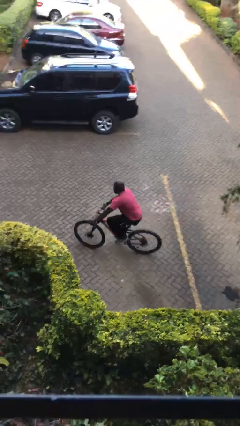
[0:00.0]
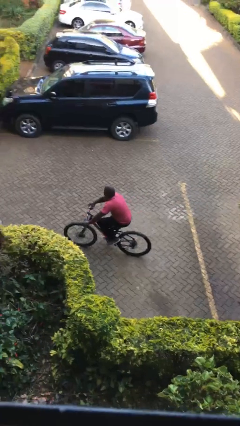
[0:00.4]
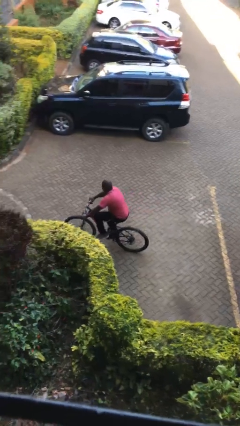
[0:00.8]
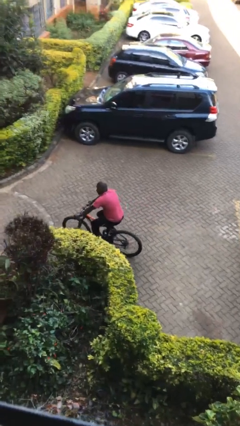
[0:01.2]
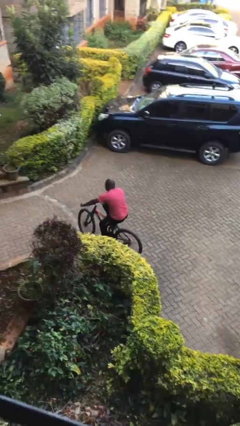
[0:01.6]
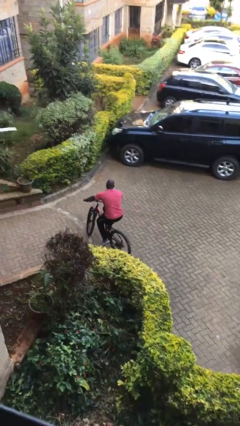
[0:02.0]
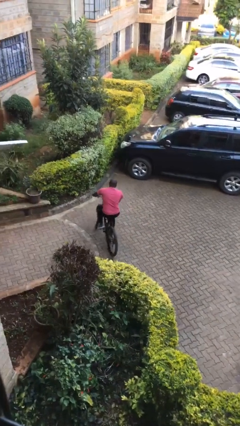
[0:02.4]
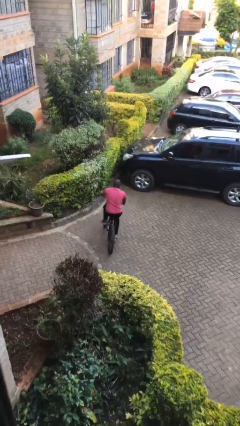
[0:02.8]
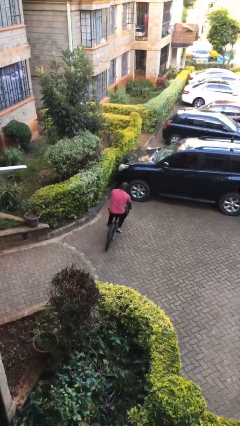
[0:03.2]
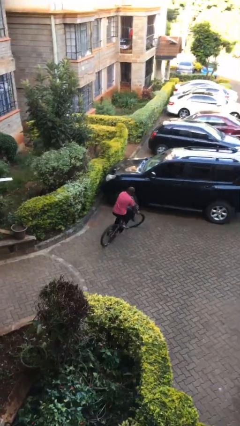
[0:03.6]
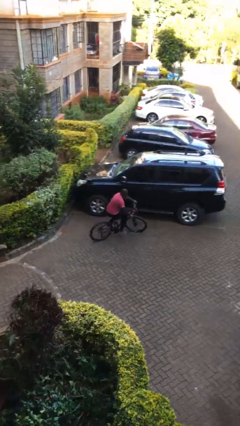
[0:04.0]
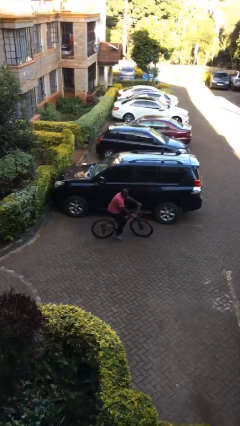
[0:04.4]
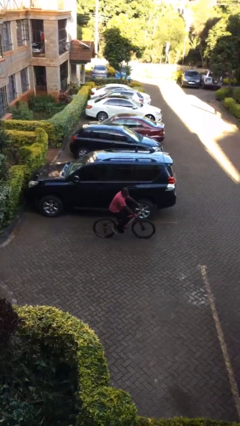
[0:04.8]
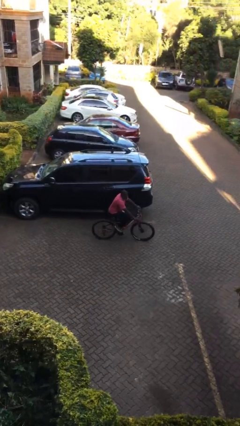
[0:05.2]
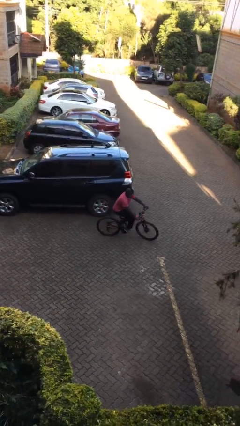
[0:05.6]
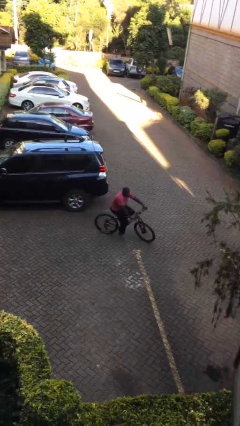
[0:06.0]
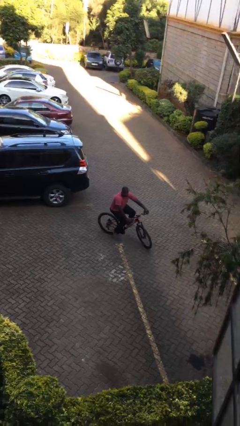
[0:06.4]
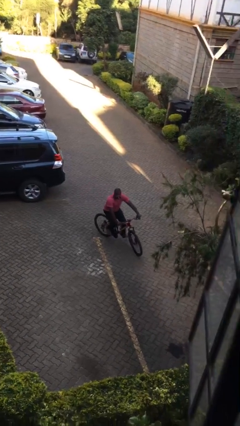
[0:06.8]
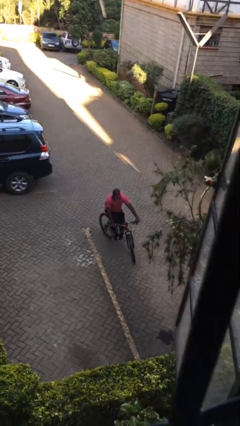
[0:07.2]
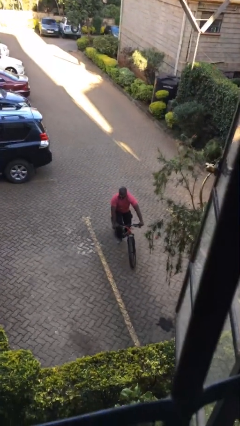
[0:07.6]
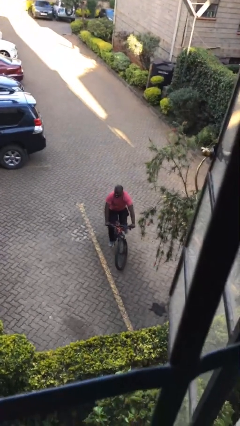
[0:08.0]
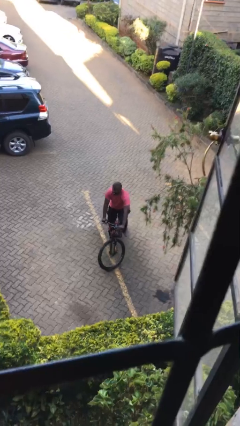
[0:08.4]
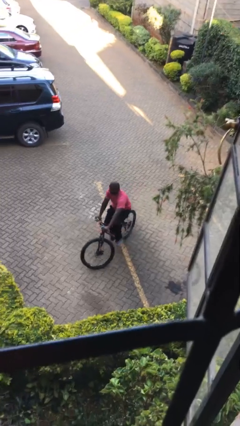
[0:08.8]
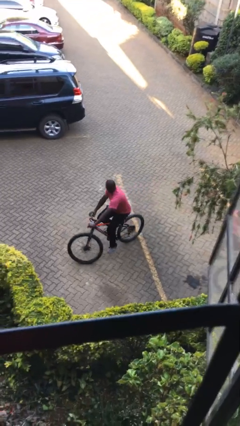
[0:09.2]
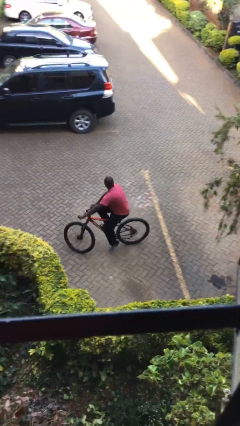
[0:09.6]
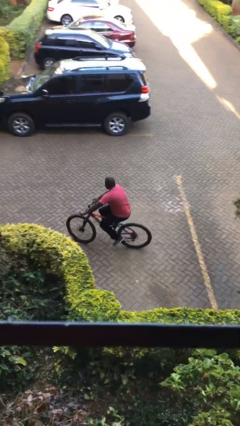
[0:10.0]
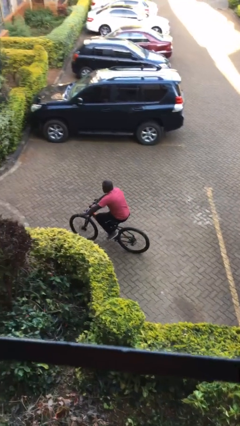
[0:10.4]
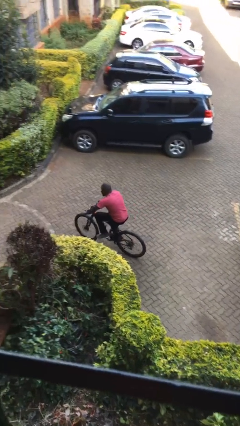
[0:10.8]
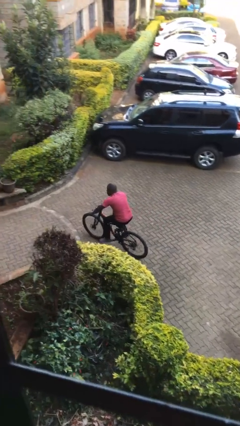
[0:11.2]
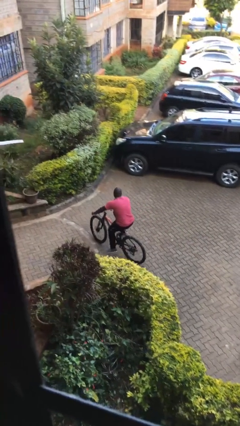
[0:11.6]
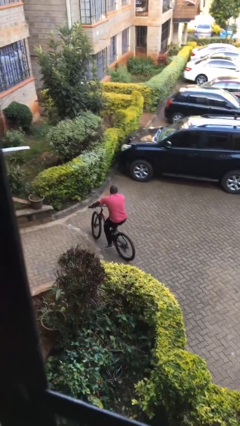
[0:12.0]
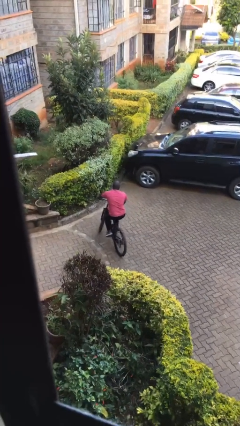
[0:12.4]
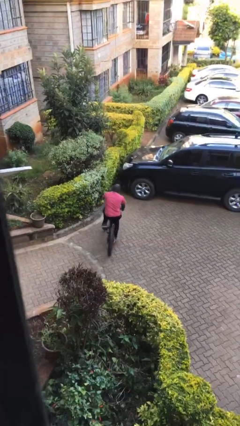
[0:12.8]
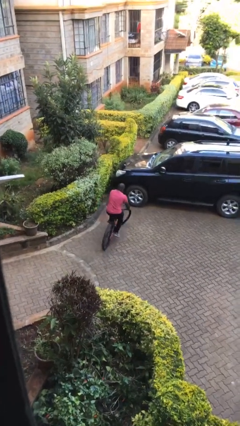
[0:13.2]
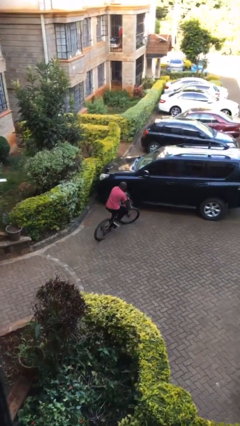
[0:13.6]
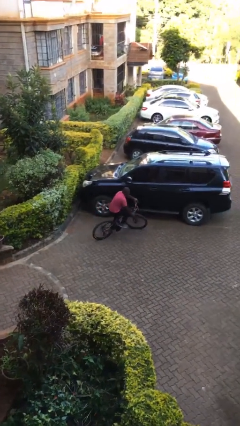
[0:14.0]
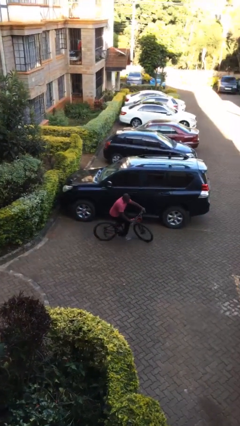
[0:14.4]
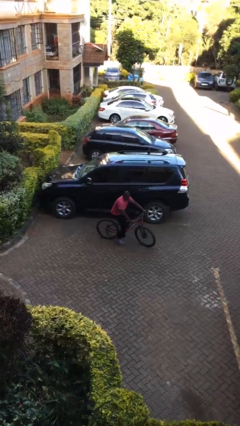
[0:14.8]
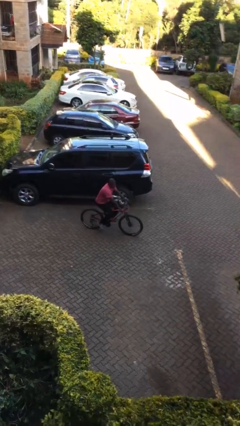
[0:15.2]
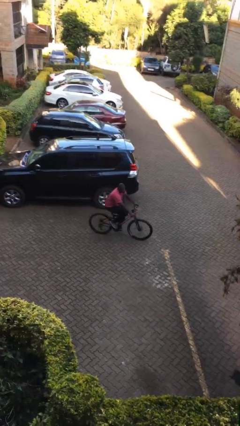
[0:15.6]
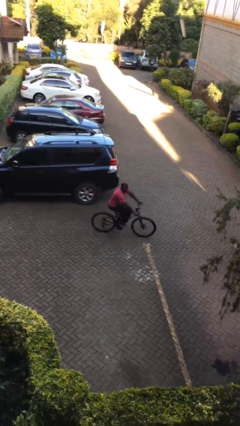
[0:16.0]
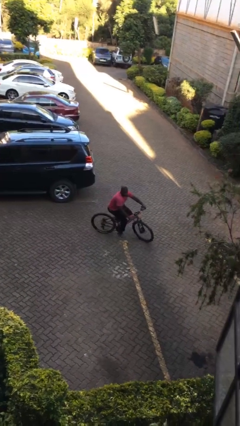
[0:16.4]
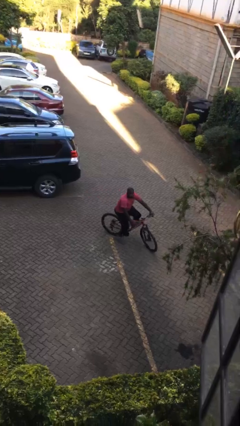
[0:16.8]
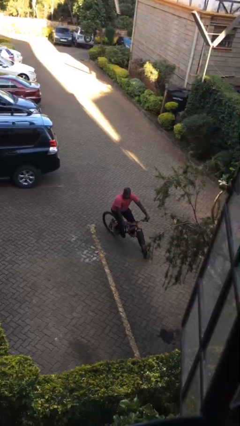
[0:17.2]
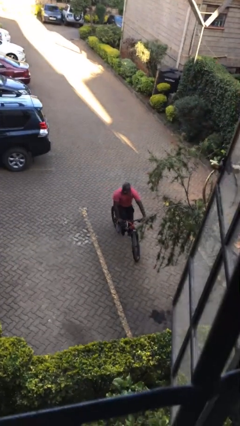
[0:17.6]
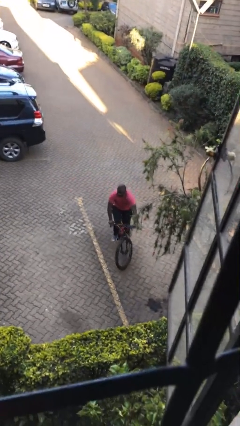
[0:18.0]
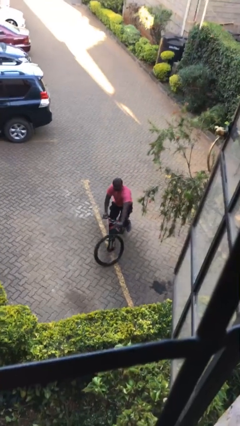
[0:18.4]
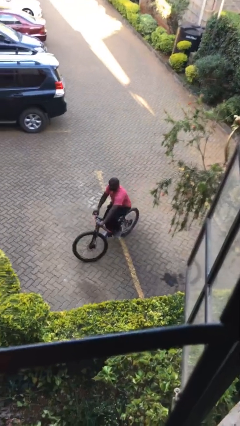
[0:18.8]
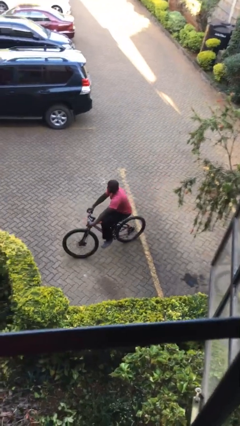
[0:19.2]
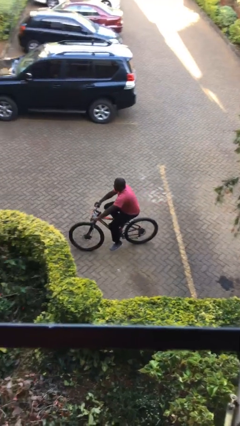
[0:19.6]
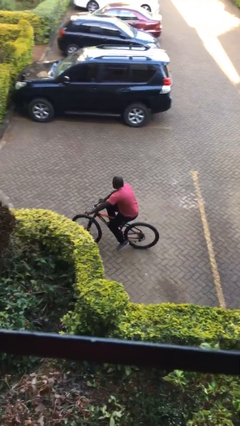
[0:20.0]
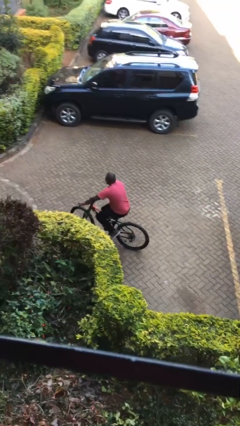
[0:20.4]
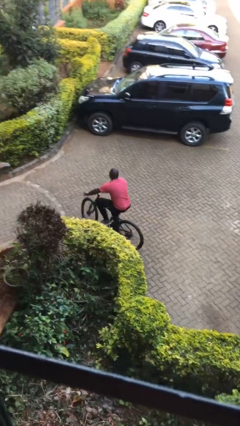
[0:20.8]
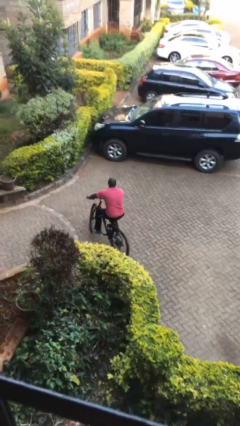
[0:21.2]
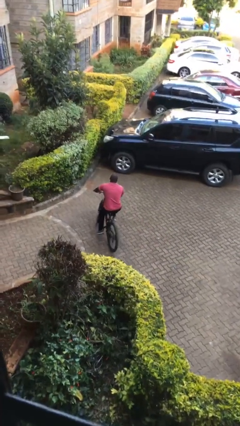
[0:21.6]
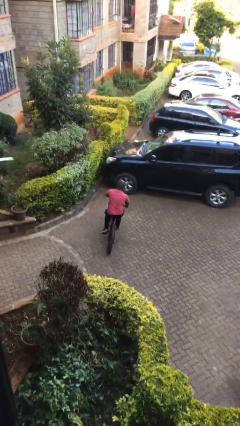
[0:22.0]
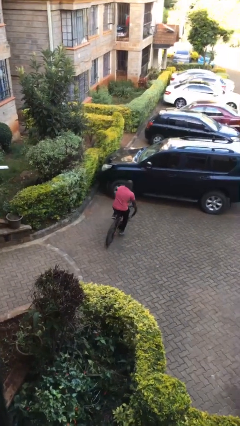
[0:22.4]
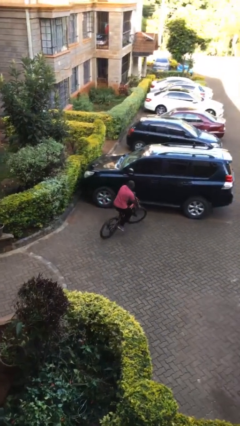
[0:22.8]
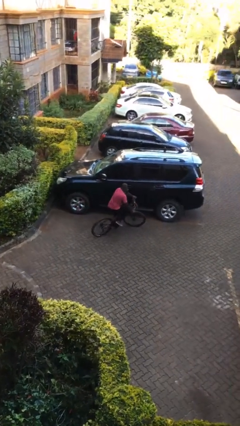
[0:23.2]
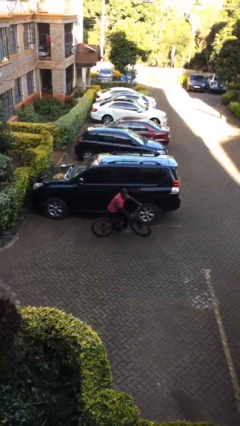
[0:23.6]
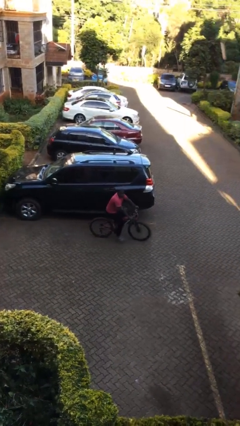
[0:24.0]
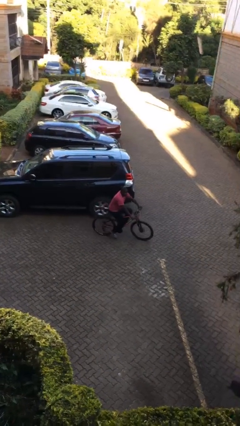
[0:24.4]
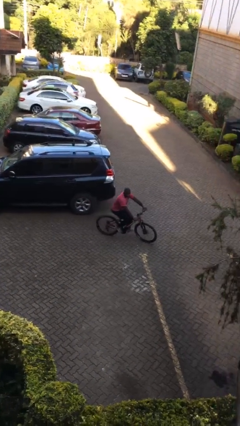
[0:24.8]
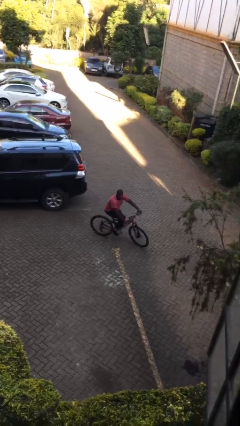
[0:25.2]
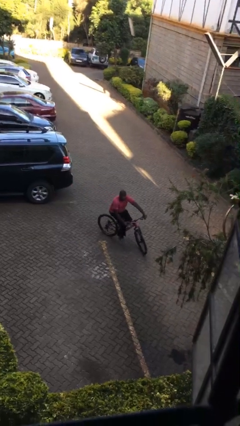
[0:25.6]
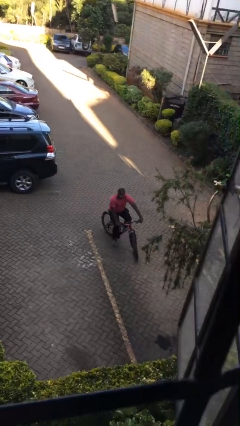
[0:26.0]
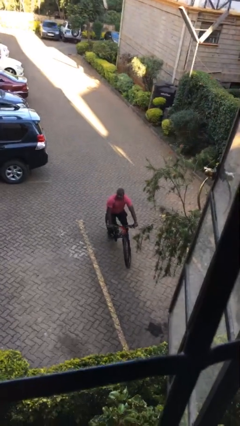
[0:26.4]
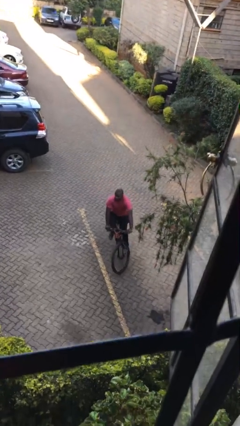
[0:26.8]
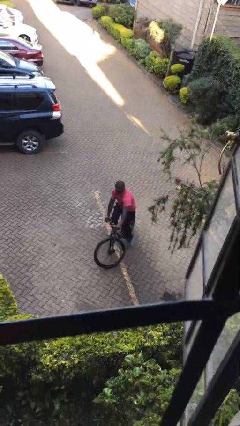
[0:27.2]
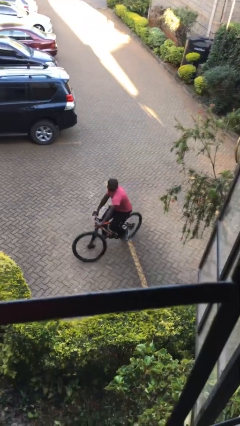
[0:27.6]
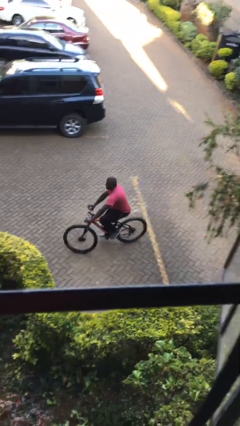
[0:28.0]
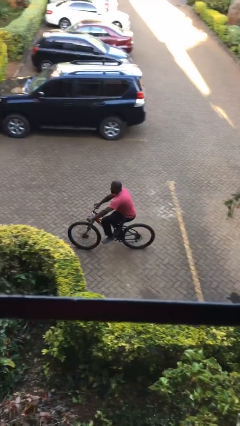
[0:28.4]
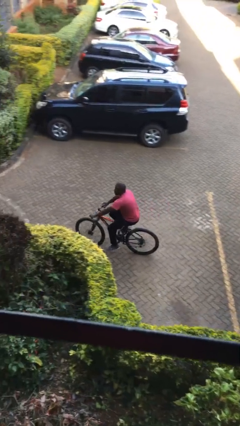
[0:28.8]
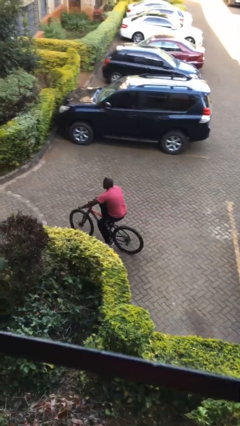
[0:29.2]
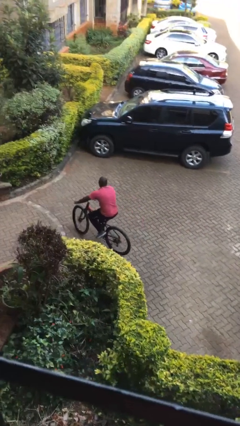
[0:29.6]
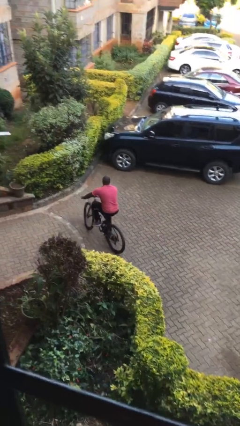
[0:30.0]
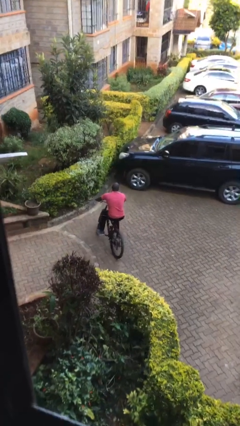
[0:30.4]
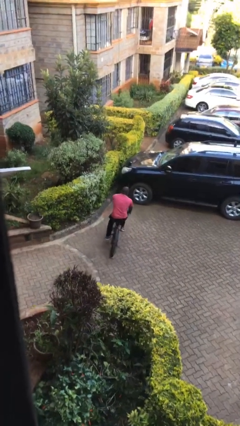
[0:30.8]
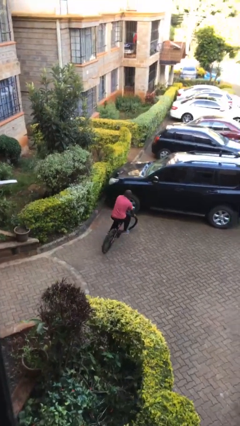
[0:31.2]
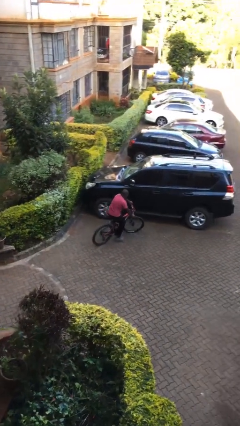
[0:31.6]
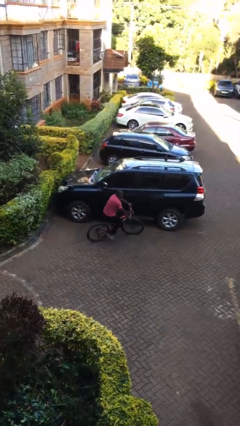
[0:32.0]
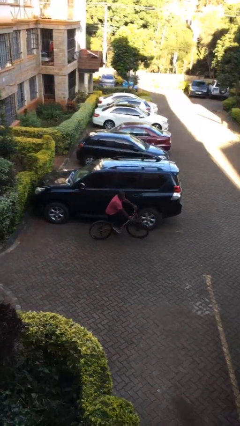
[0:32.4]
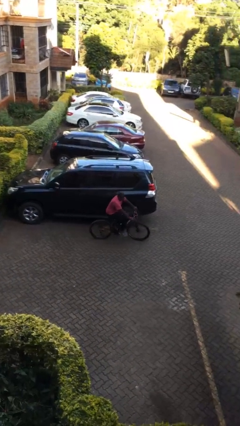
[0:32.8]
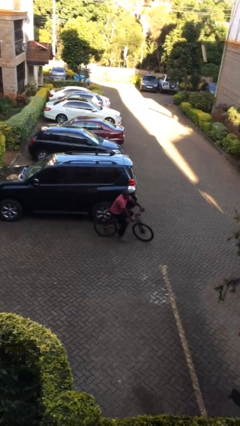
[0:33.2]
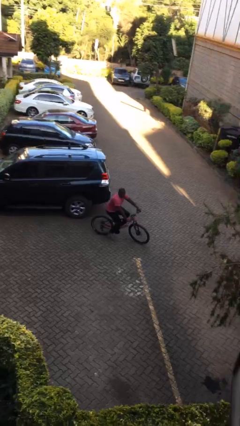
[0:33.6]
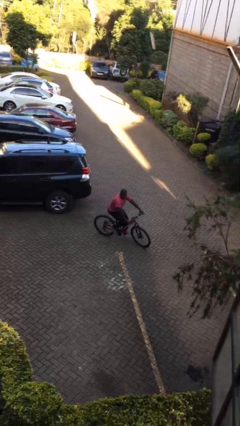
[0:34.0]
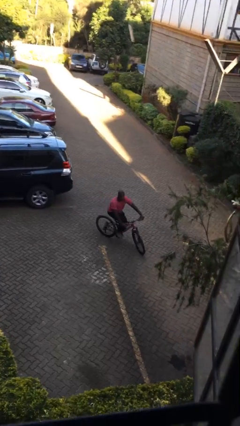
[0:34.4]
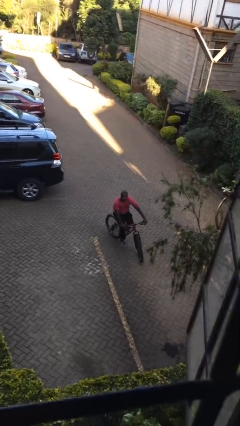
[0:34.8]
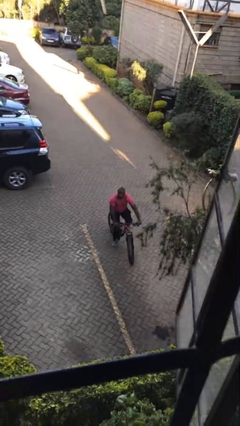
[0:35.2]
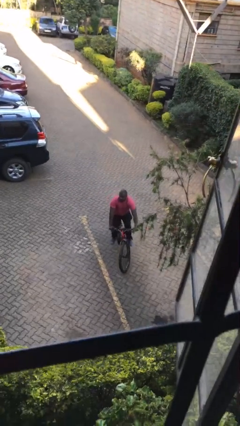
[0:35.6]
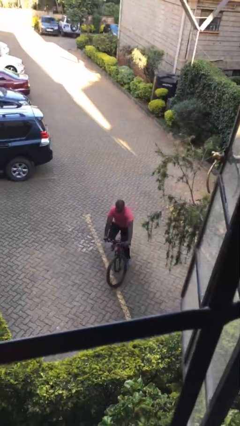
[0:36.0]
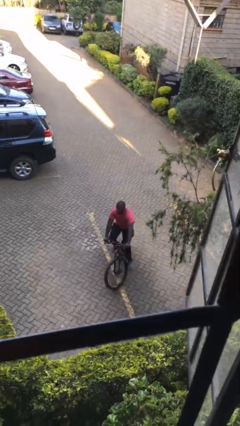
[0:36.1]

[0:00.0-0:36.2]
person rides bicycle

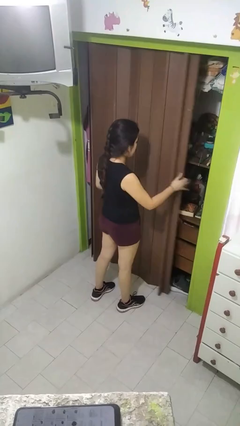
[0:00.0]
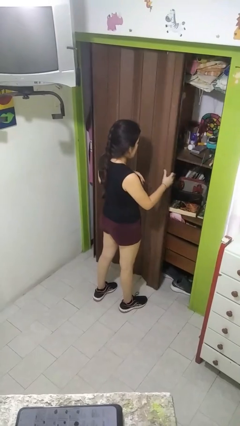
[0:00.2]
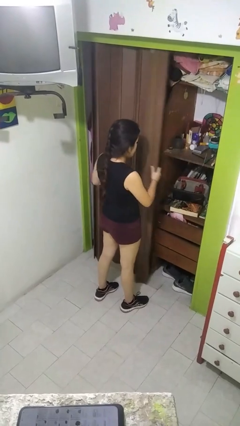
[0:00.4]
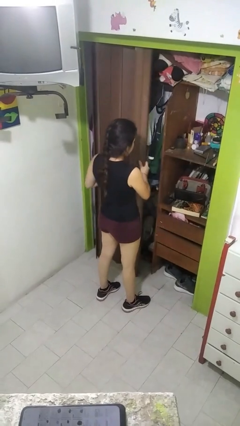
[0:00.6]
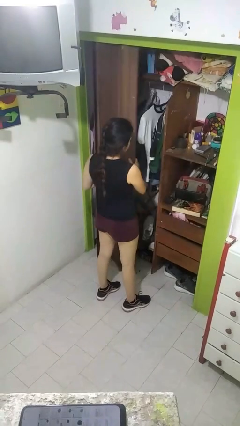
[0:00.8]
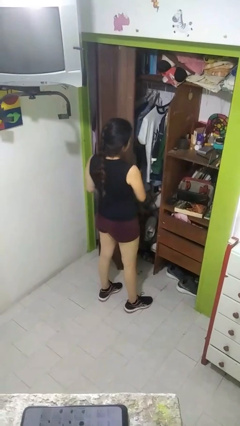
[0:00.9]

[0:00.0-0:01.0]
person opens closet door
